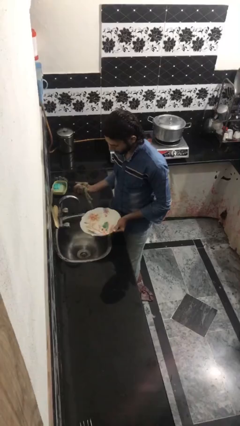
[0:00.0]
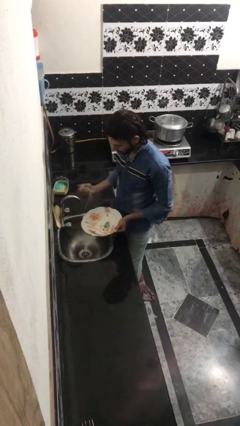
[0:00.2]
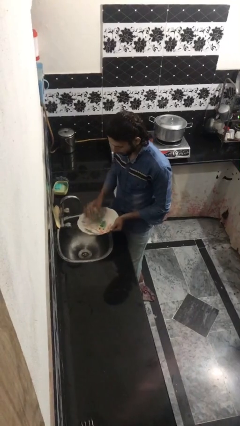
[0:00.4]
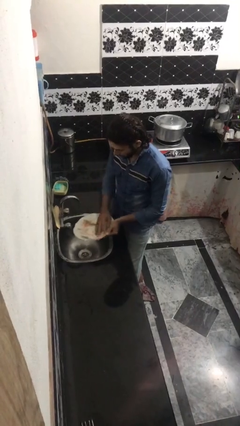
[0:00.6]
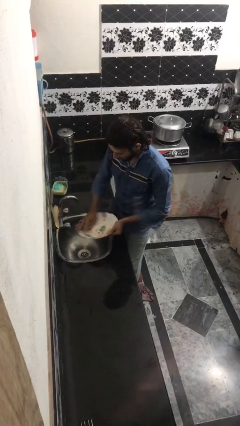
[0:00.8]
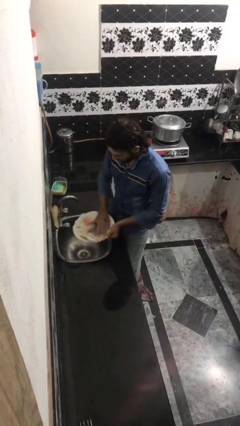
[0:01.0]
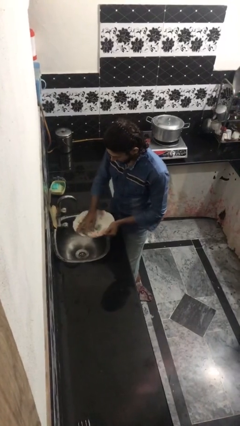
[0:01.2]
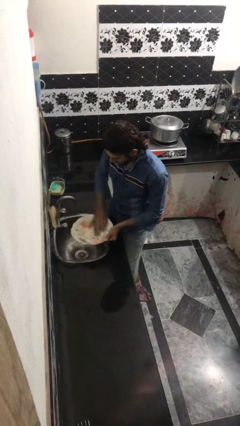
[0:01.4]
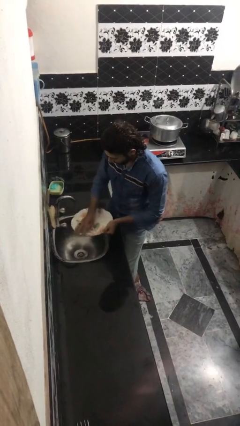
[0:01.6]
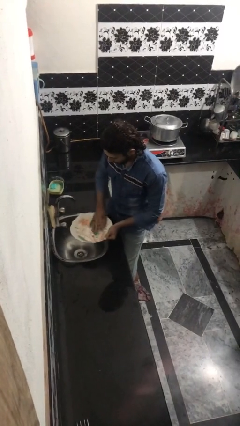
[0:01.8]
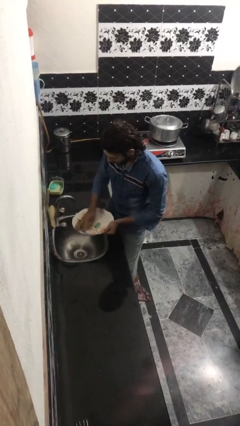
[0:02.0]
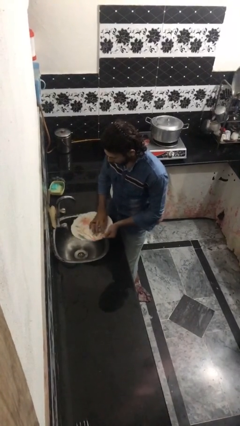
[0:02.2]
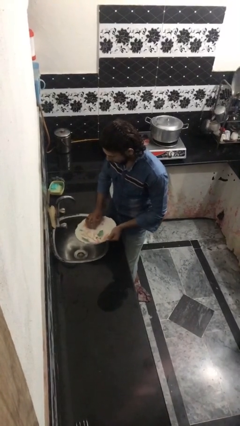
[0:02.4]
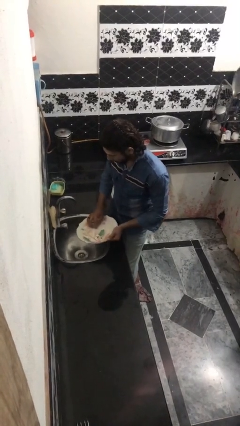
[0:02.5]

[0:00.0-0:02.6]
person washes dish

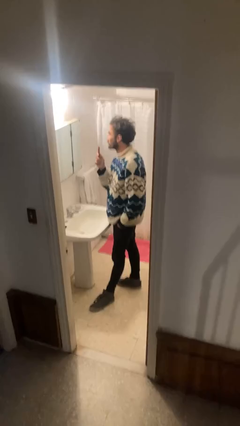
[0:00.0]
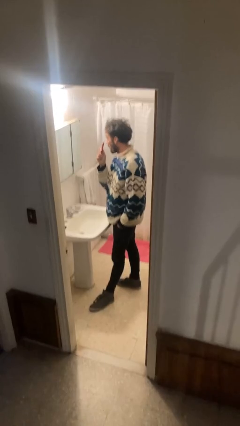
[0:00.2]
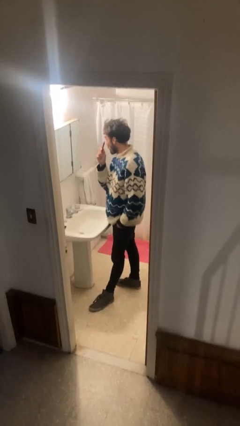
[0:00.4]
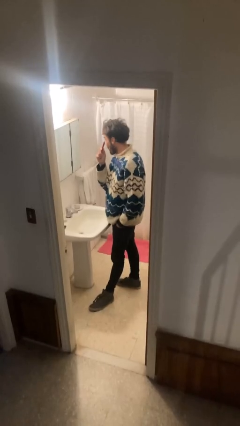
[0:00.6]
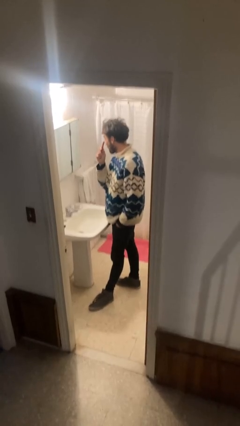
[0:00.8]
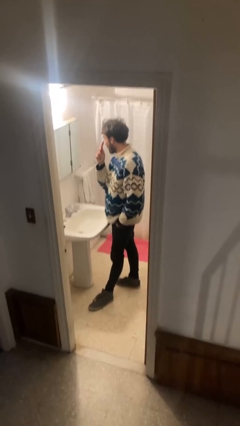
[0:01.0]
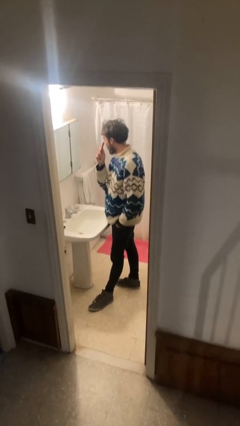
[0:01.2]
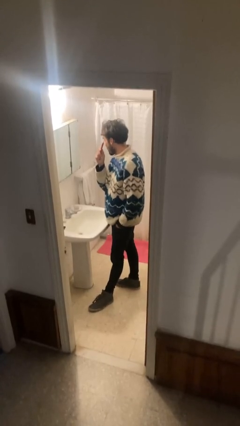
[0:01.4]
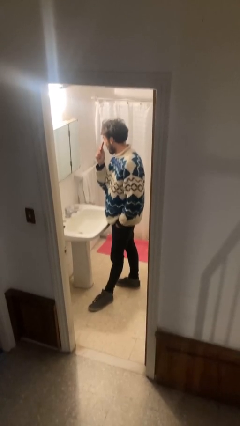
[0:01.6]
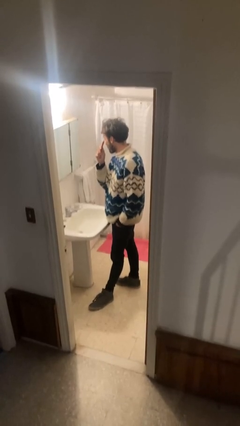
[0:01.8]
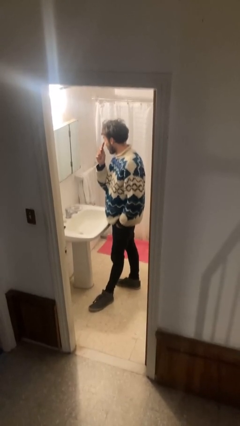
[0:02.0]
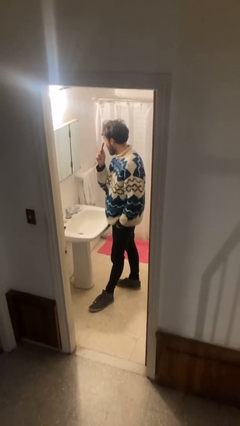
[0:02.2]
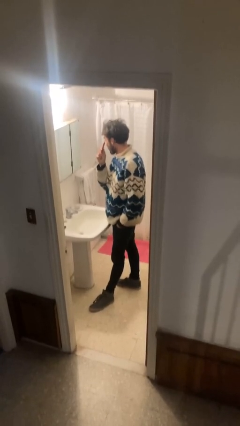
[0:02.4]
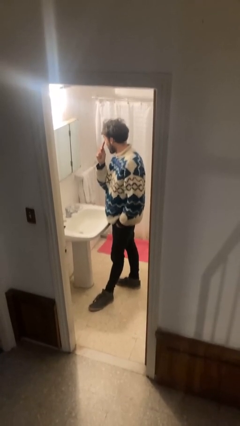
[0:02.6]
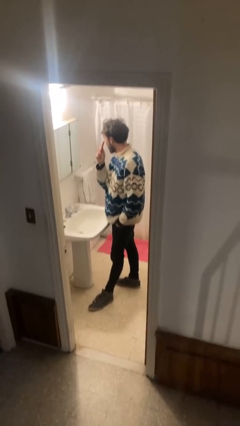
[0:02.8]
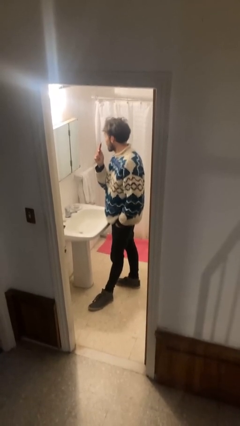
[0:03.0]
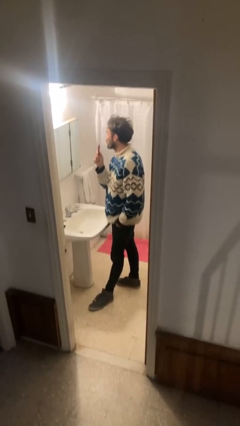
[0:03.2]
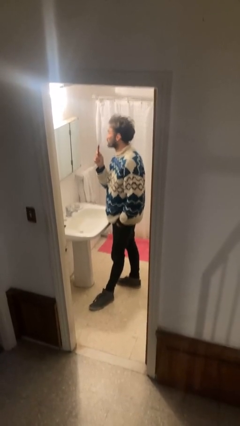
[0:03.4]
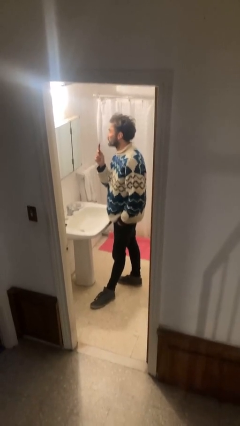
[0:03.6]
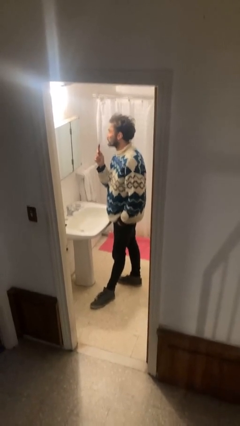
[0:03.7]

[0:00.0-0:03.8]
person applies eye makeup

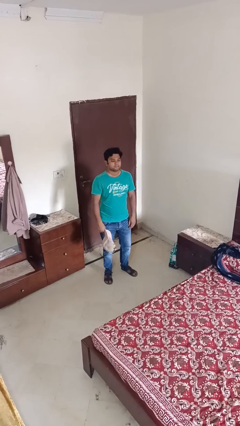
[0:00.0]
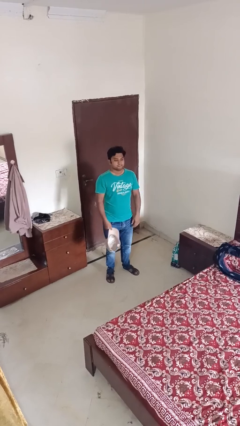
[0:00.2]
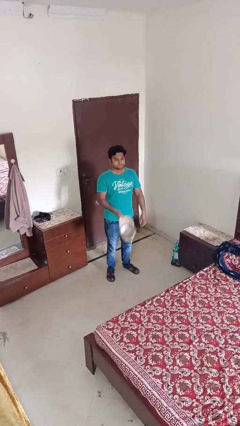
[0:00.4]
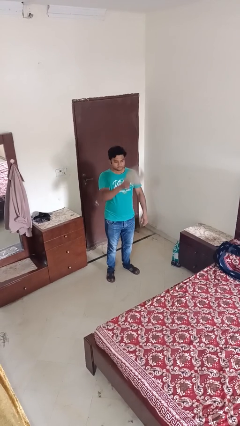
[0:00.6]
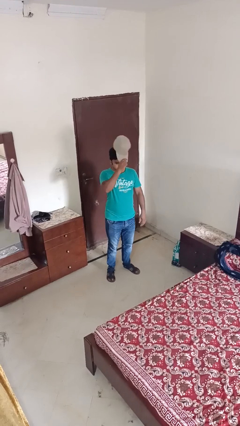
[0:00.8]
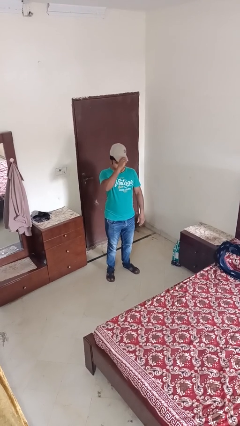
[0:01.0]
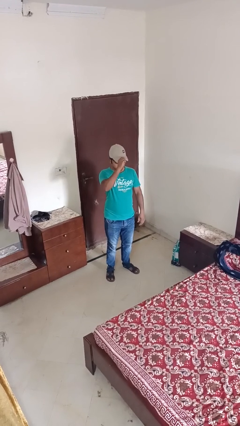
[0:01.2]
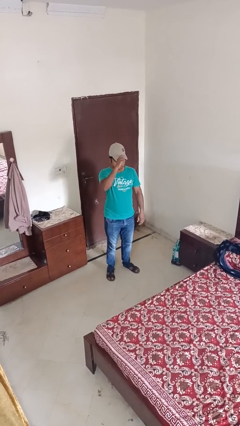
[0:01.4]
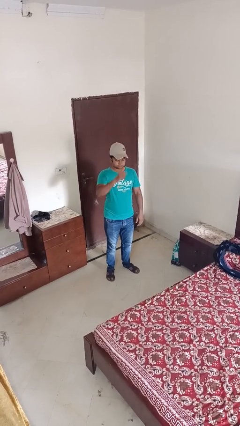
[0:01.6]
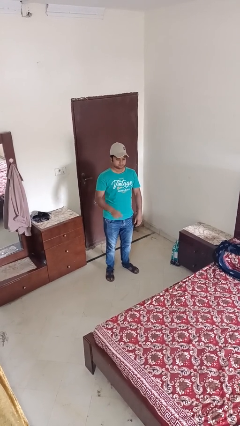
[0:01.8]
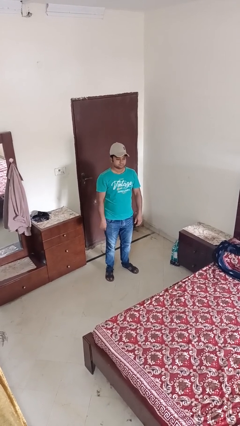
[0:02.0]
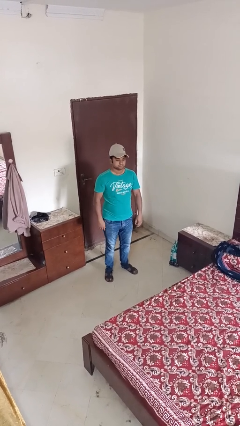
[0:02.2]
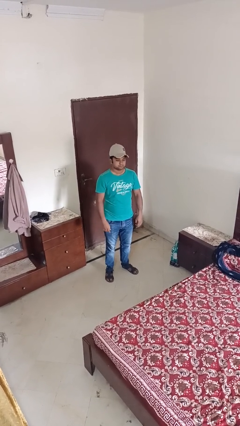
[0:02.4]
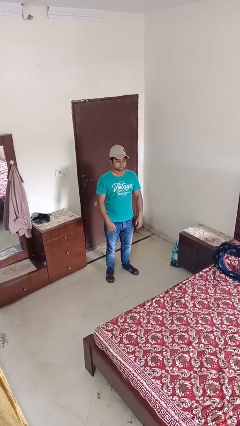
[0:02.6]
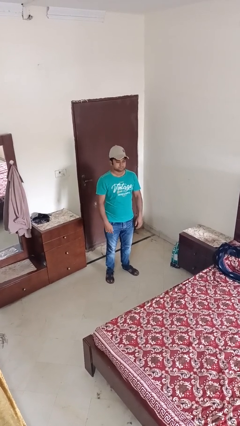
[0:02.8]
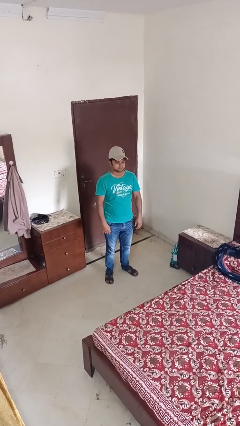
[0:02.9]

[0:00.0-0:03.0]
person puts on hat

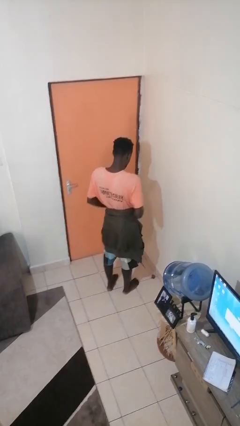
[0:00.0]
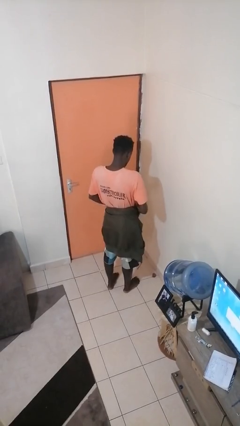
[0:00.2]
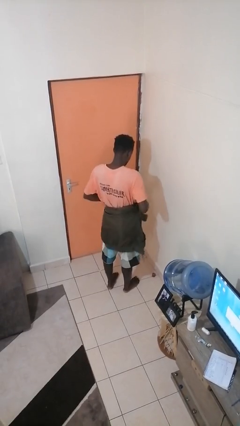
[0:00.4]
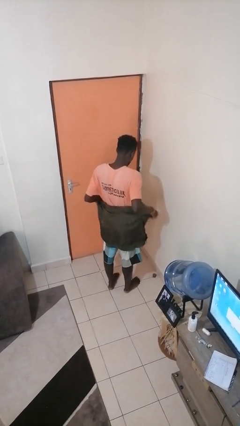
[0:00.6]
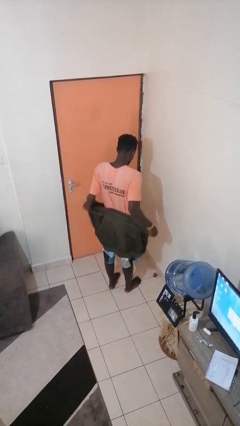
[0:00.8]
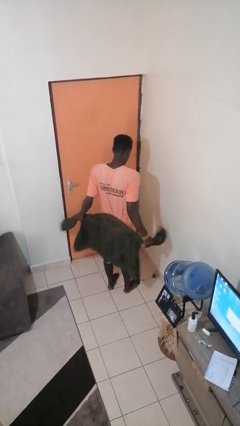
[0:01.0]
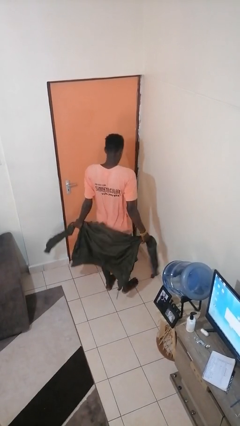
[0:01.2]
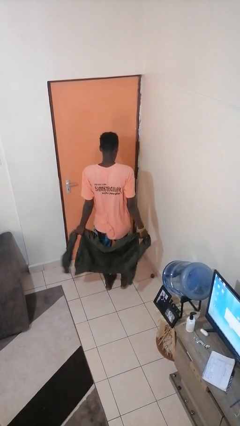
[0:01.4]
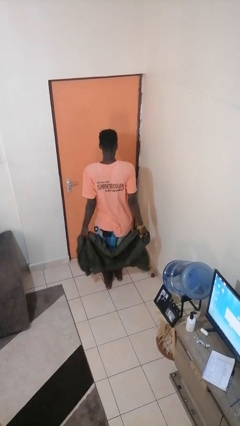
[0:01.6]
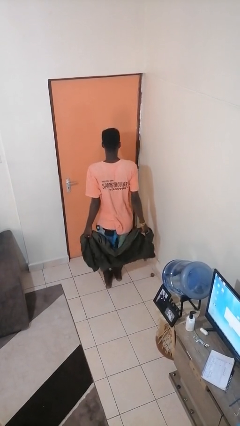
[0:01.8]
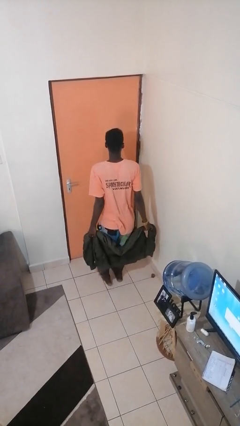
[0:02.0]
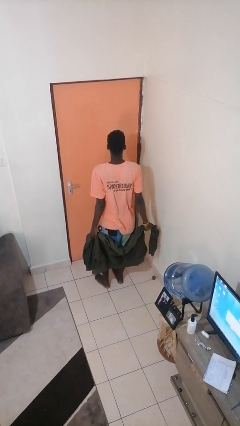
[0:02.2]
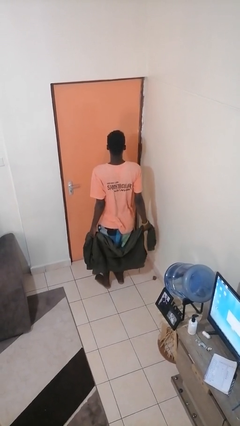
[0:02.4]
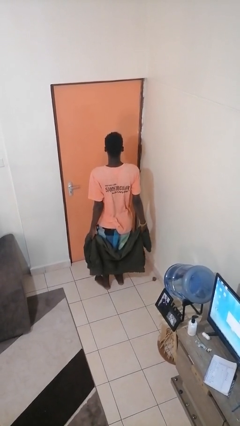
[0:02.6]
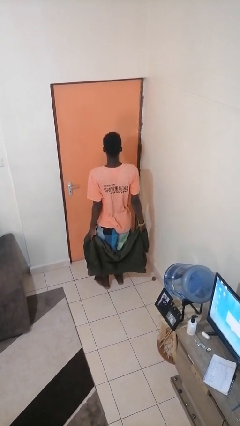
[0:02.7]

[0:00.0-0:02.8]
person unties jacket around waist

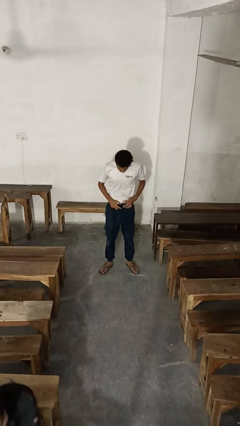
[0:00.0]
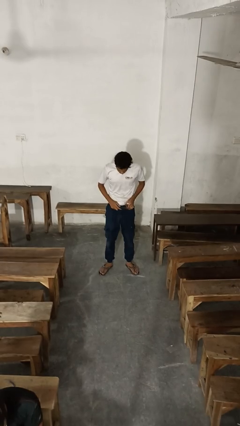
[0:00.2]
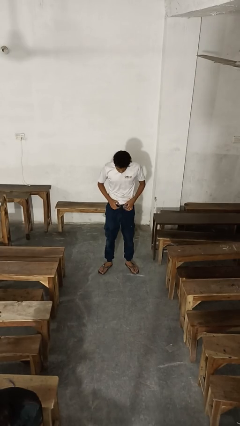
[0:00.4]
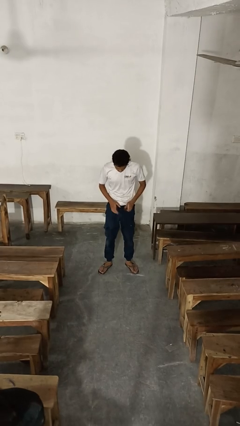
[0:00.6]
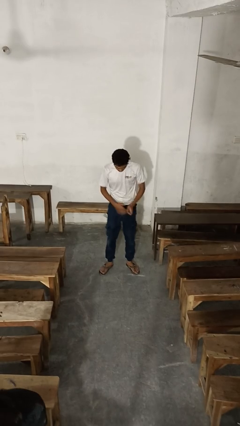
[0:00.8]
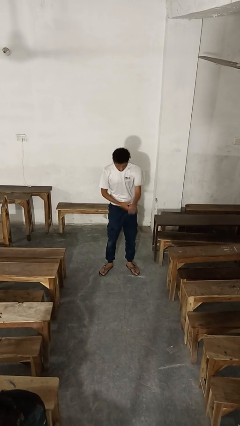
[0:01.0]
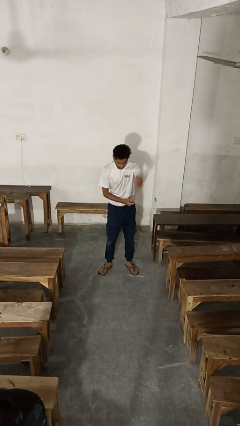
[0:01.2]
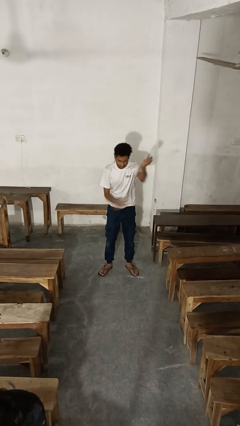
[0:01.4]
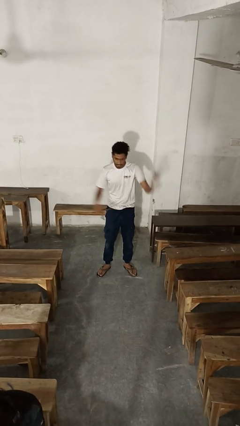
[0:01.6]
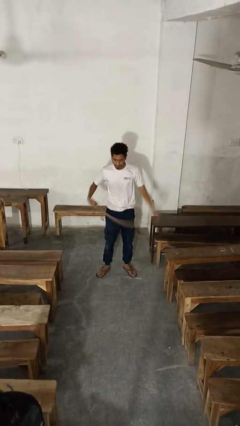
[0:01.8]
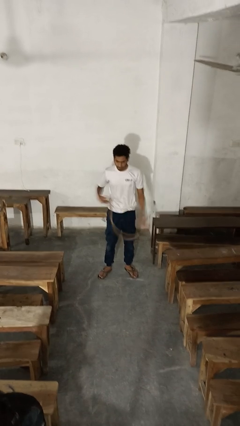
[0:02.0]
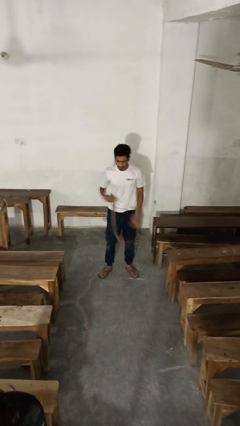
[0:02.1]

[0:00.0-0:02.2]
person takes off belt

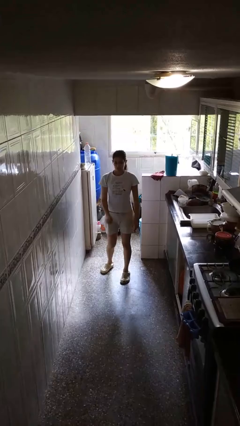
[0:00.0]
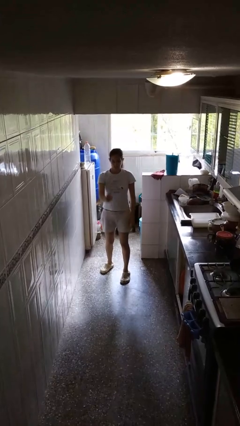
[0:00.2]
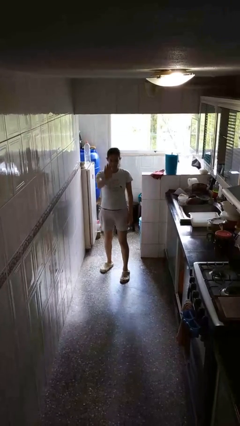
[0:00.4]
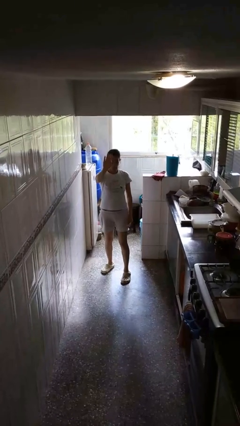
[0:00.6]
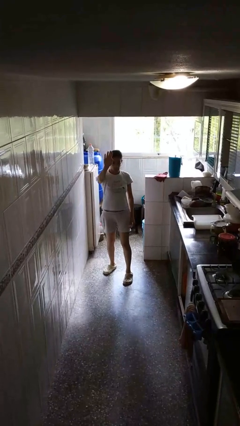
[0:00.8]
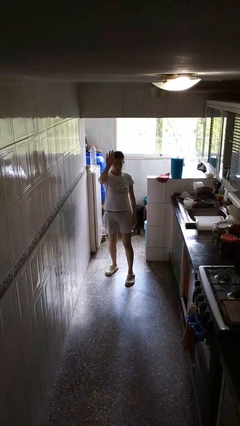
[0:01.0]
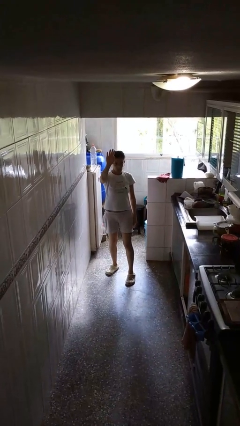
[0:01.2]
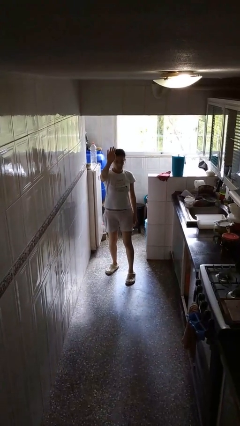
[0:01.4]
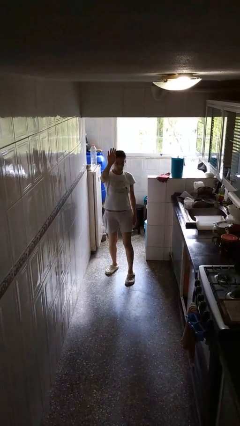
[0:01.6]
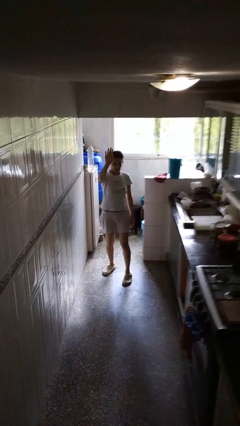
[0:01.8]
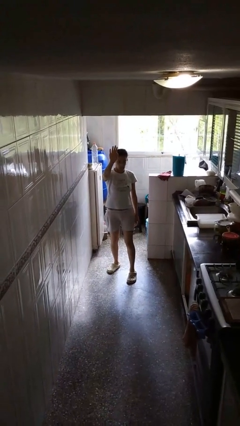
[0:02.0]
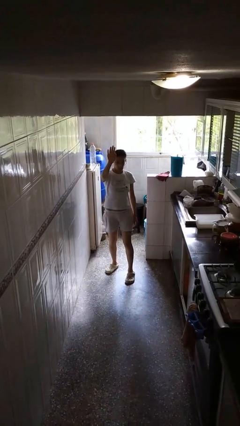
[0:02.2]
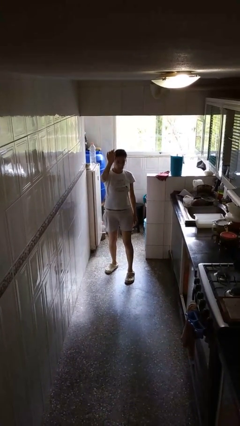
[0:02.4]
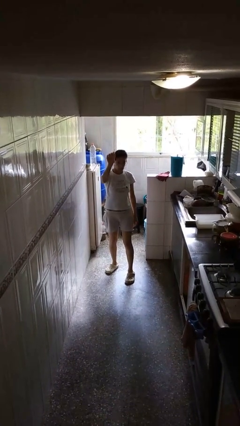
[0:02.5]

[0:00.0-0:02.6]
person gestures raise hand

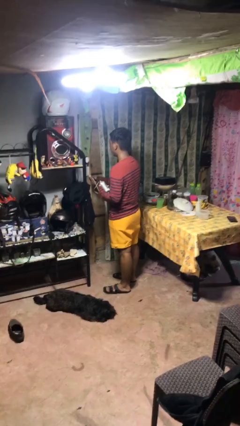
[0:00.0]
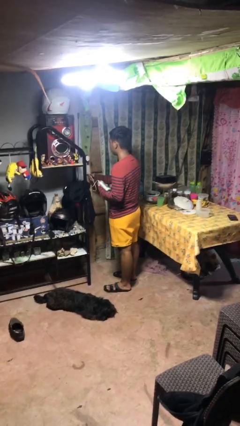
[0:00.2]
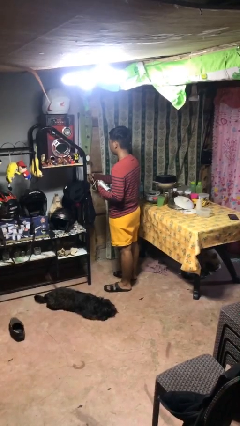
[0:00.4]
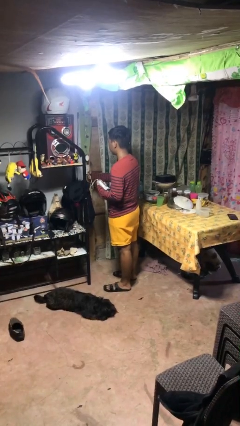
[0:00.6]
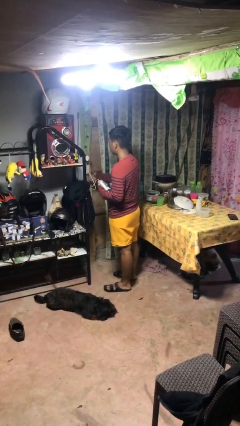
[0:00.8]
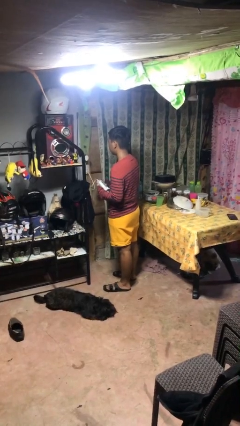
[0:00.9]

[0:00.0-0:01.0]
person plugs into electrical socket
